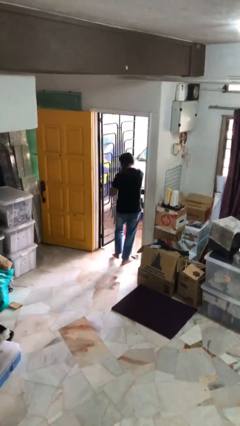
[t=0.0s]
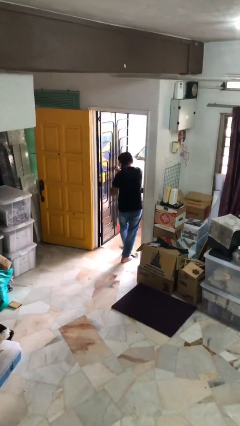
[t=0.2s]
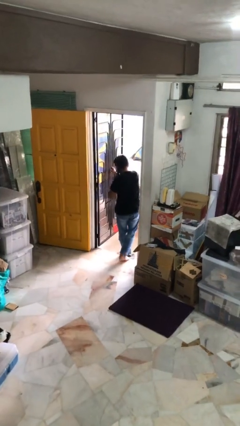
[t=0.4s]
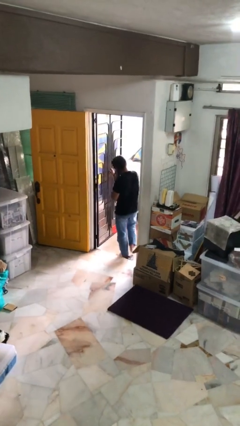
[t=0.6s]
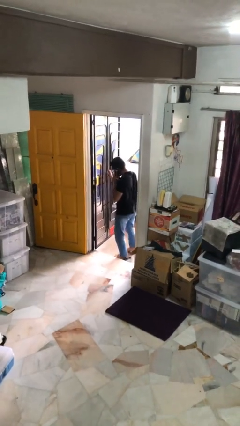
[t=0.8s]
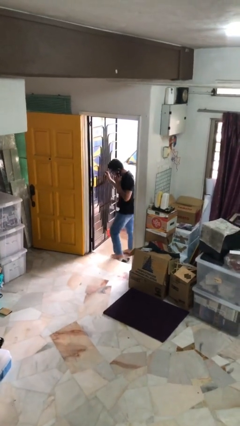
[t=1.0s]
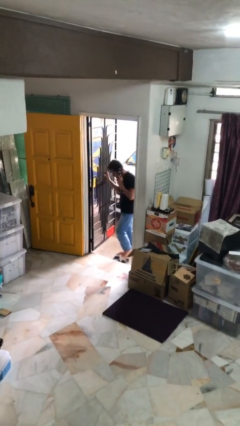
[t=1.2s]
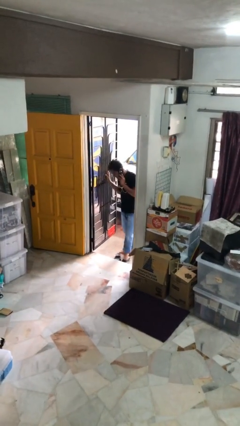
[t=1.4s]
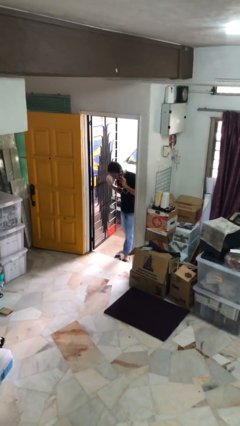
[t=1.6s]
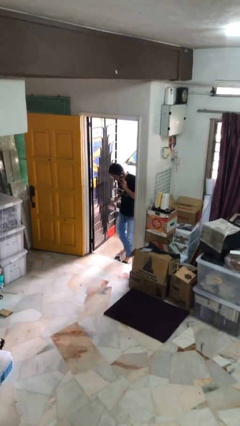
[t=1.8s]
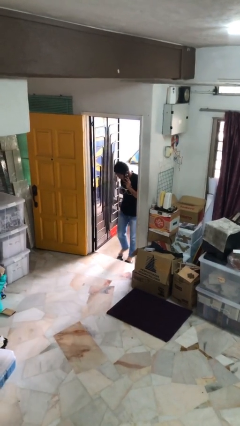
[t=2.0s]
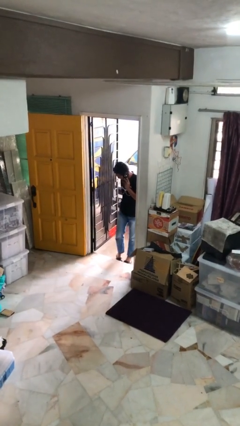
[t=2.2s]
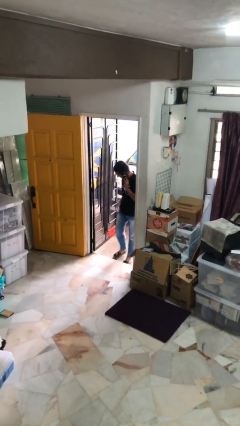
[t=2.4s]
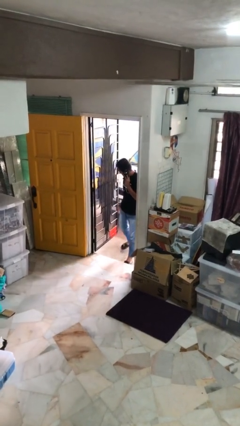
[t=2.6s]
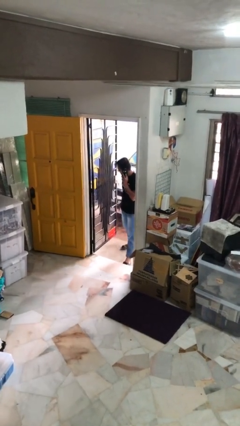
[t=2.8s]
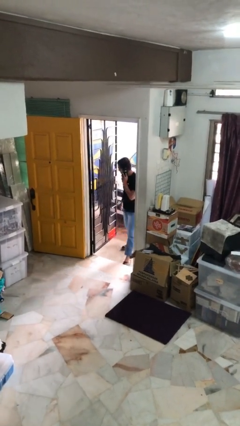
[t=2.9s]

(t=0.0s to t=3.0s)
person exits scene through structure

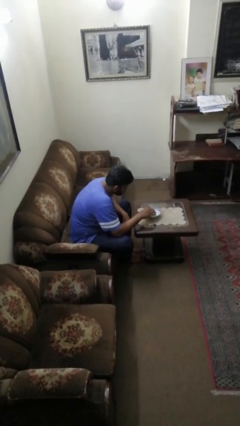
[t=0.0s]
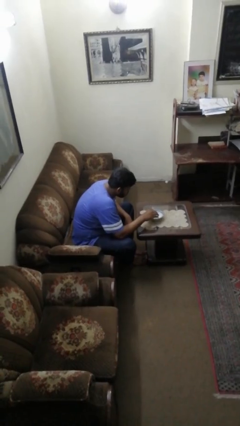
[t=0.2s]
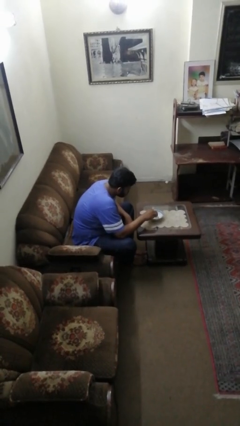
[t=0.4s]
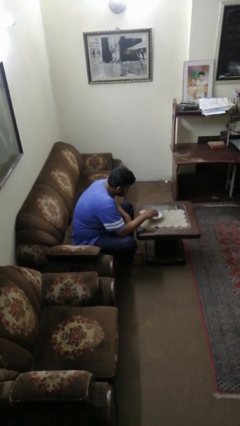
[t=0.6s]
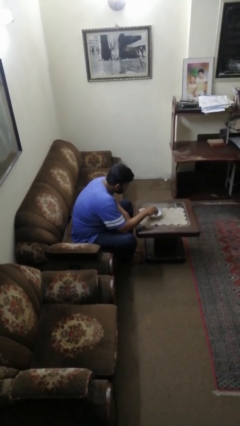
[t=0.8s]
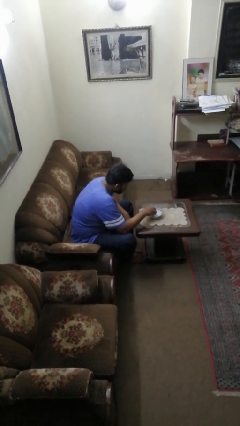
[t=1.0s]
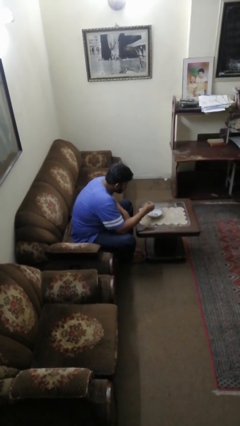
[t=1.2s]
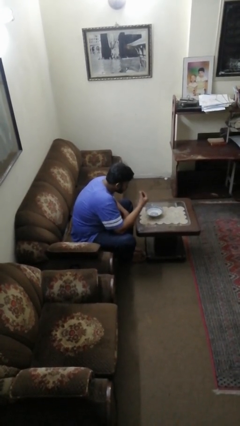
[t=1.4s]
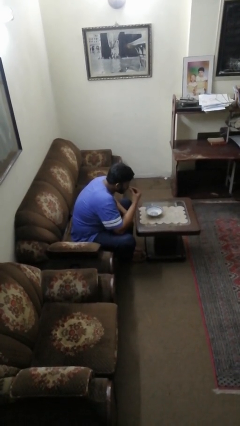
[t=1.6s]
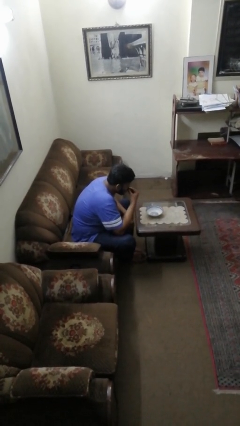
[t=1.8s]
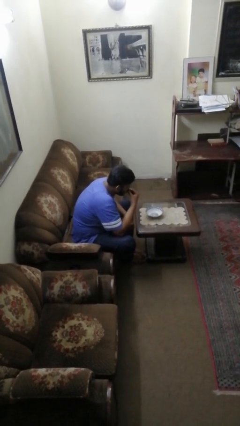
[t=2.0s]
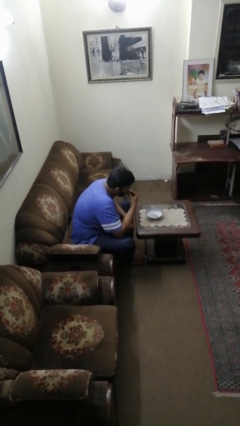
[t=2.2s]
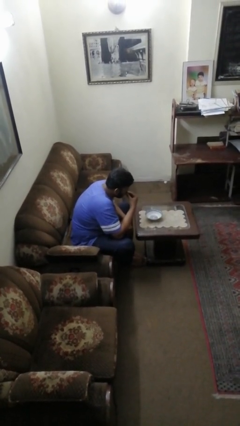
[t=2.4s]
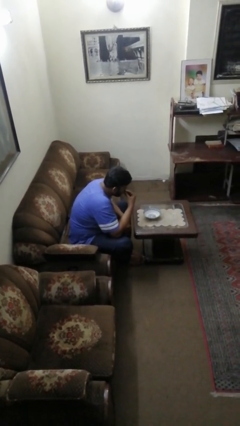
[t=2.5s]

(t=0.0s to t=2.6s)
person eats with hands

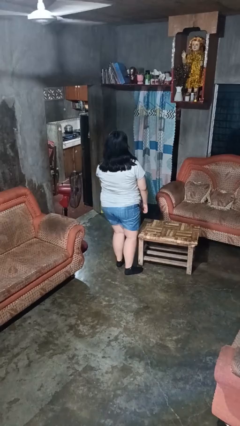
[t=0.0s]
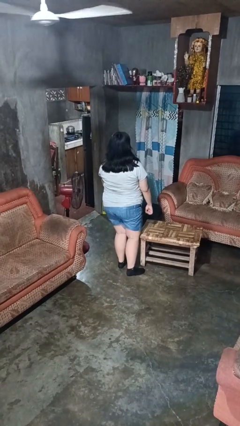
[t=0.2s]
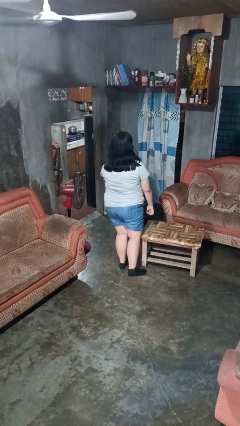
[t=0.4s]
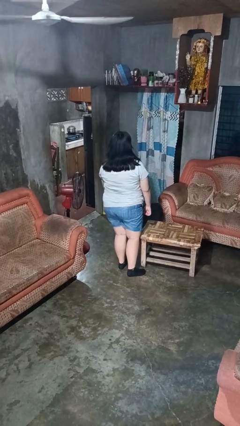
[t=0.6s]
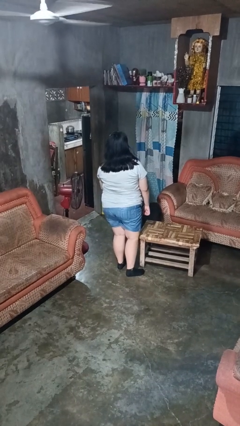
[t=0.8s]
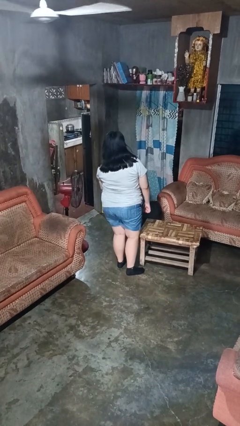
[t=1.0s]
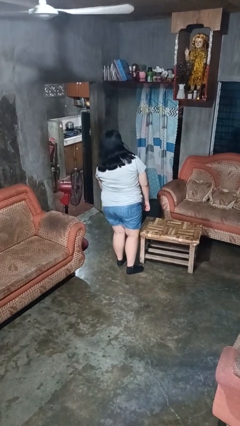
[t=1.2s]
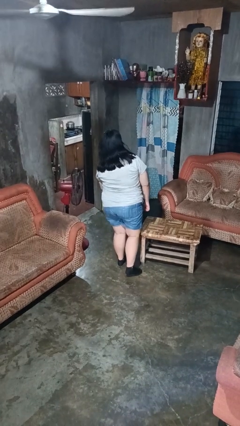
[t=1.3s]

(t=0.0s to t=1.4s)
person bumps into table

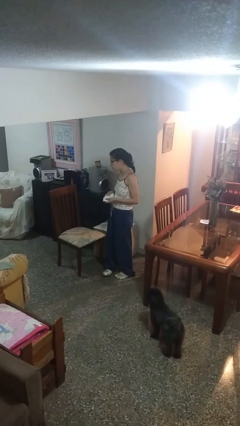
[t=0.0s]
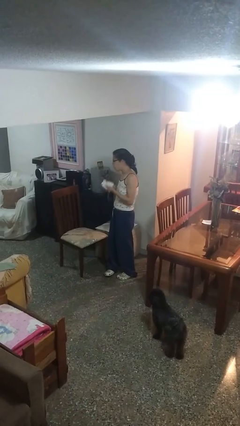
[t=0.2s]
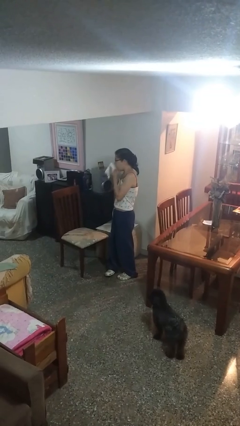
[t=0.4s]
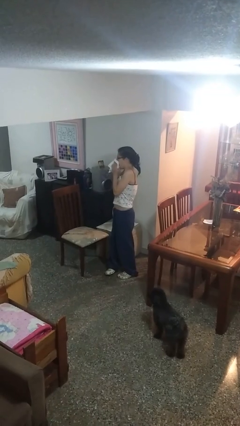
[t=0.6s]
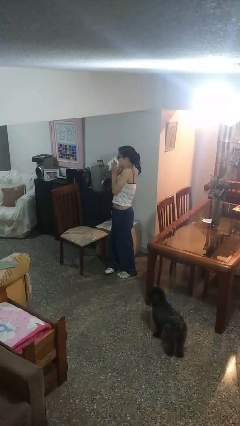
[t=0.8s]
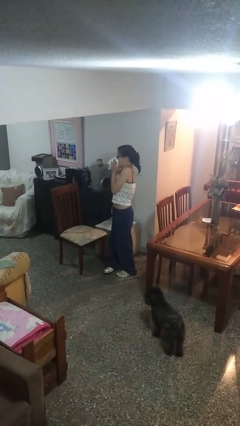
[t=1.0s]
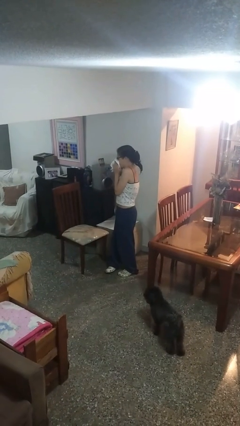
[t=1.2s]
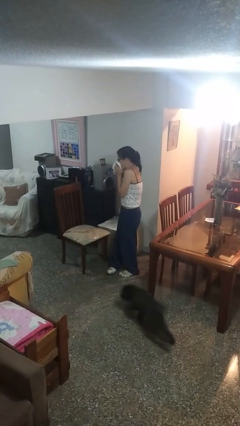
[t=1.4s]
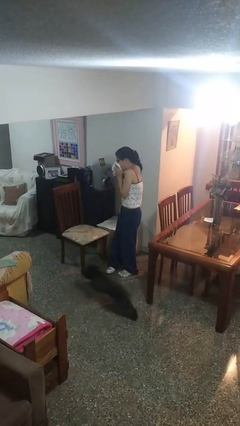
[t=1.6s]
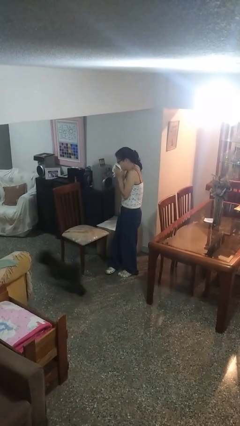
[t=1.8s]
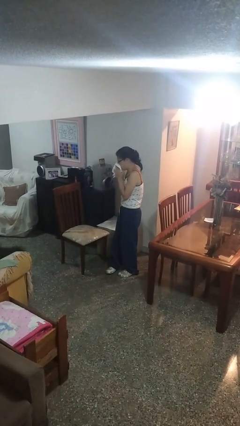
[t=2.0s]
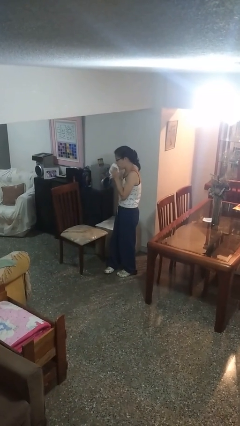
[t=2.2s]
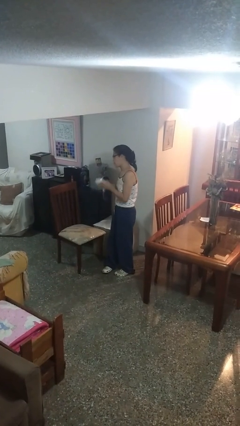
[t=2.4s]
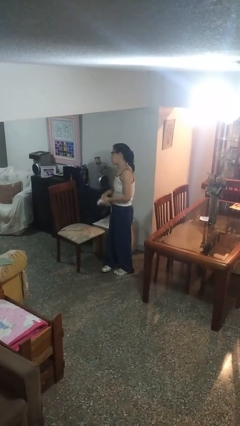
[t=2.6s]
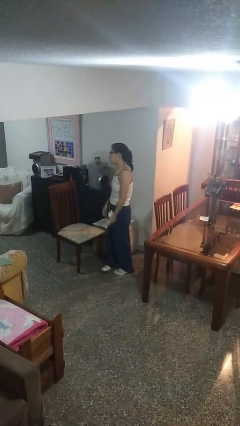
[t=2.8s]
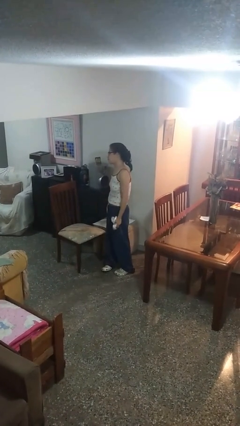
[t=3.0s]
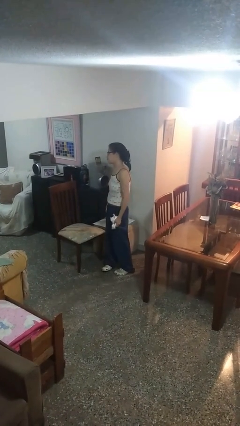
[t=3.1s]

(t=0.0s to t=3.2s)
person blows nose

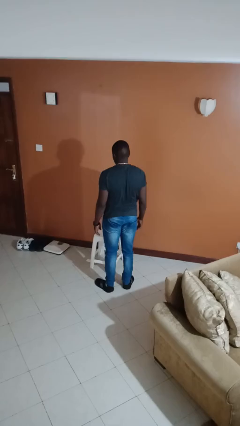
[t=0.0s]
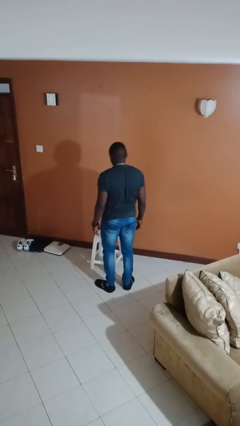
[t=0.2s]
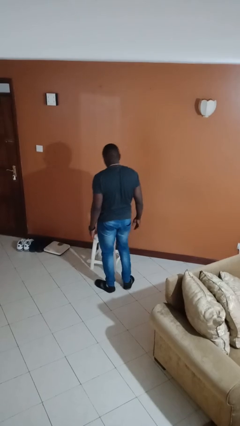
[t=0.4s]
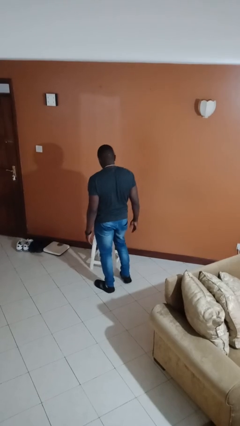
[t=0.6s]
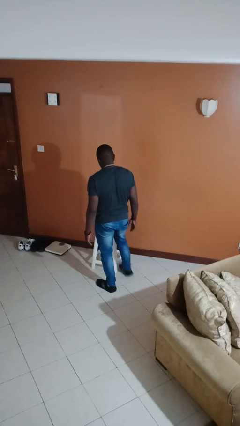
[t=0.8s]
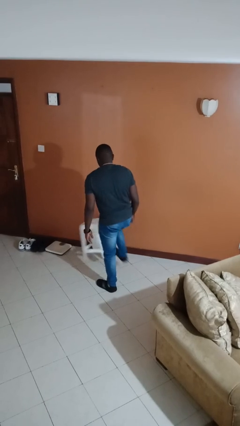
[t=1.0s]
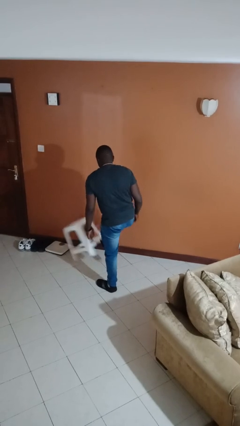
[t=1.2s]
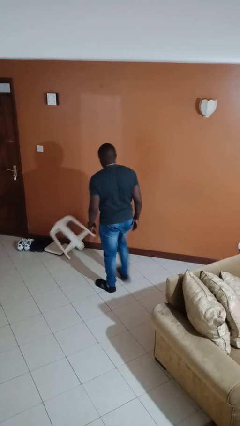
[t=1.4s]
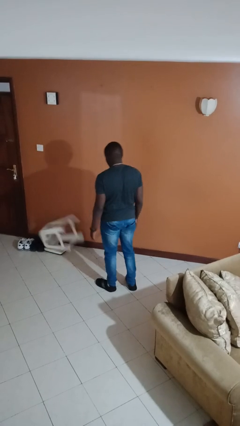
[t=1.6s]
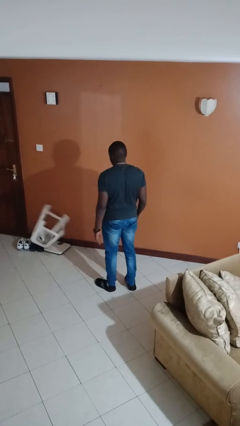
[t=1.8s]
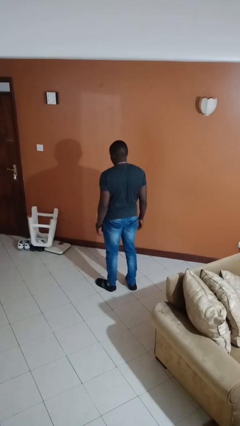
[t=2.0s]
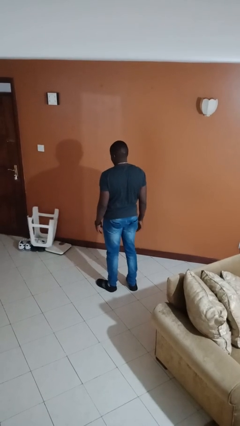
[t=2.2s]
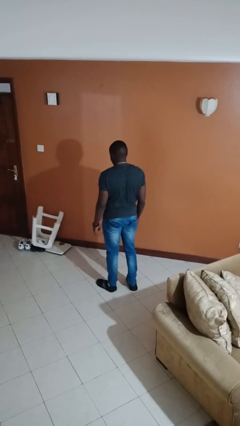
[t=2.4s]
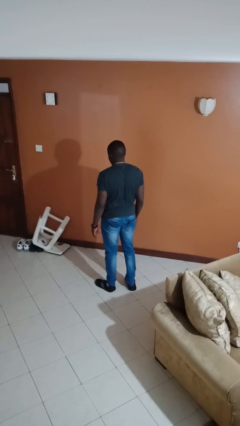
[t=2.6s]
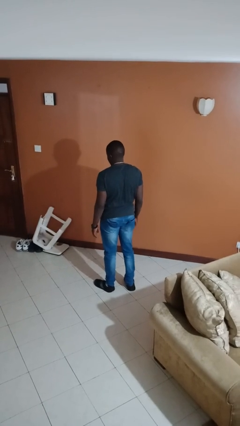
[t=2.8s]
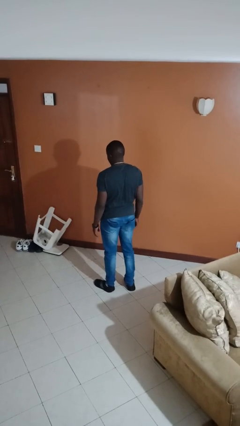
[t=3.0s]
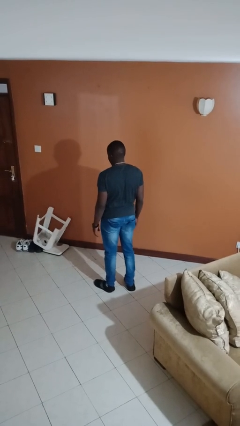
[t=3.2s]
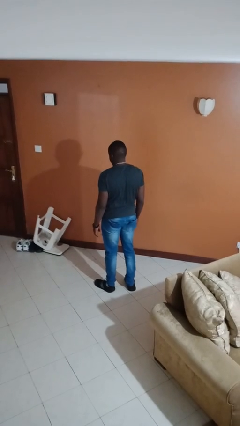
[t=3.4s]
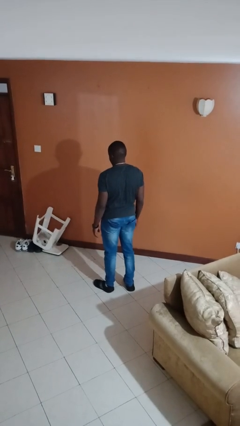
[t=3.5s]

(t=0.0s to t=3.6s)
person knocks over furniture

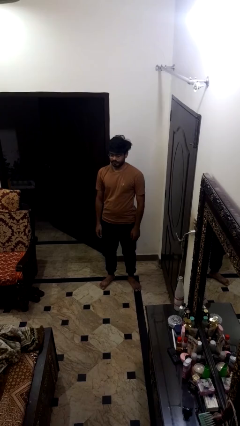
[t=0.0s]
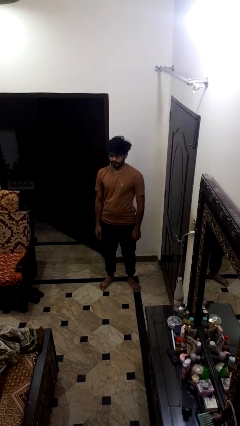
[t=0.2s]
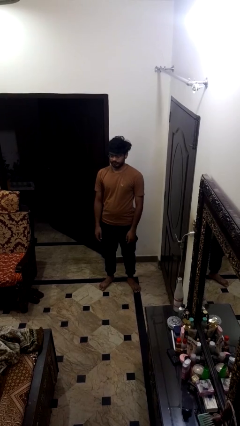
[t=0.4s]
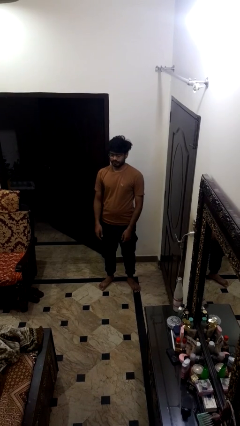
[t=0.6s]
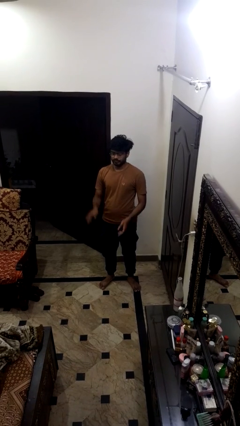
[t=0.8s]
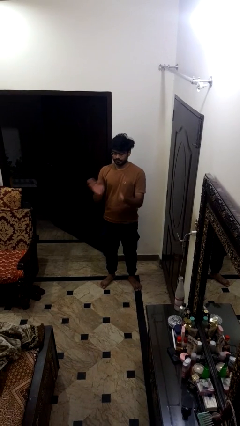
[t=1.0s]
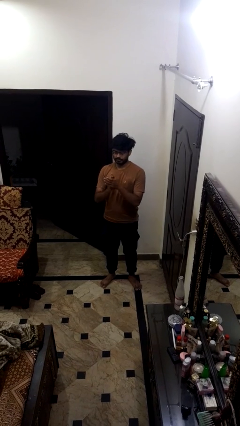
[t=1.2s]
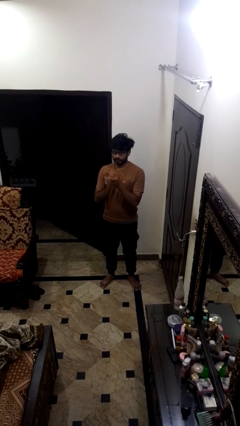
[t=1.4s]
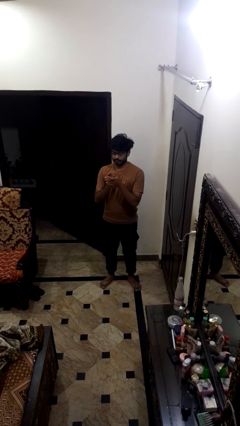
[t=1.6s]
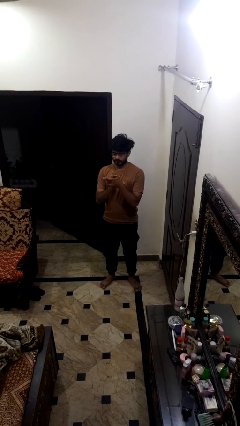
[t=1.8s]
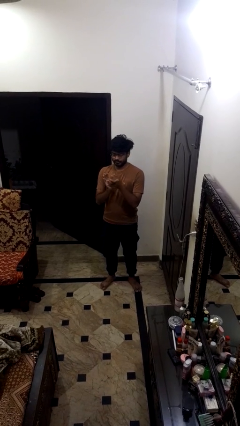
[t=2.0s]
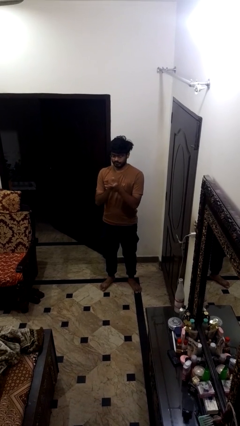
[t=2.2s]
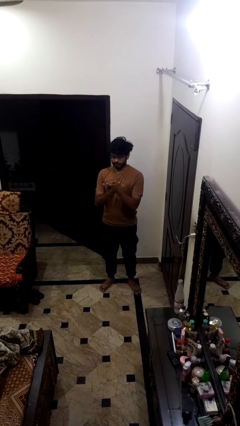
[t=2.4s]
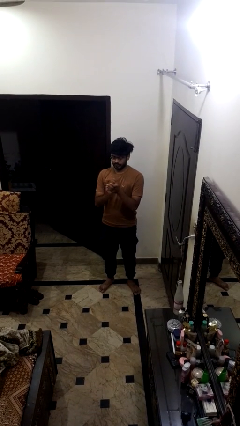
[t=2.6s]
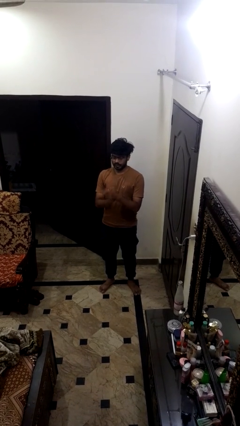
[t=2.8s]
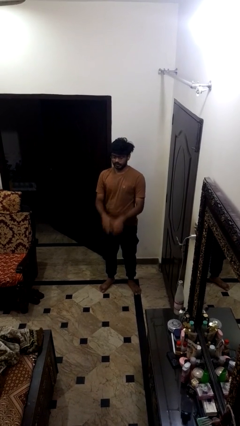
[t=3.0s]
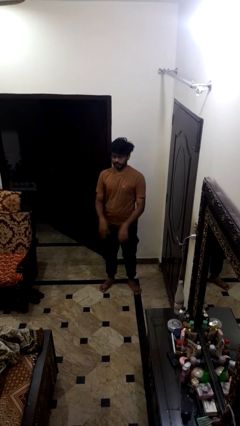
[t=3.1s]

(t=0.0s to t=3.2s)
person claps hands

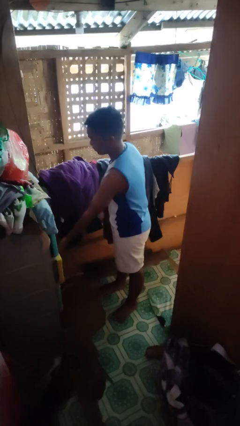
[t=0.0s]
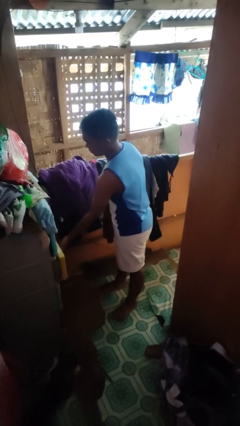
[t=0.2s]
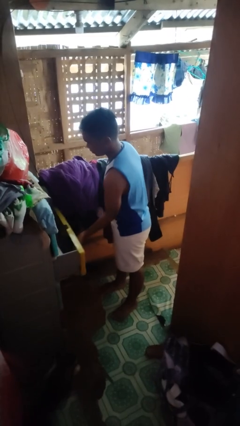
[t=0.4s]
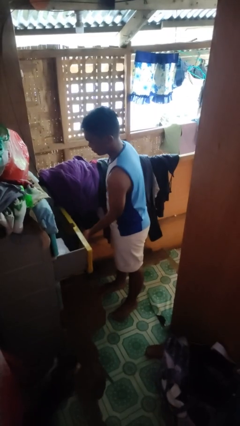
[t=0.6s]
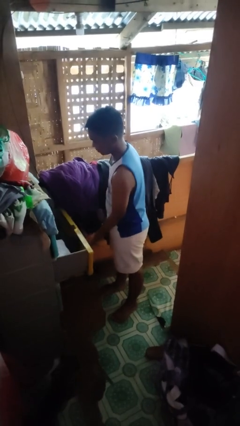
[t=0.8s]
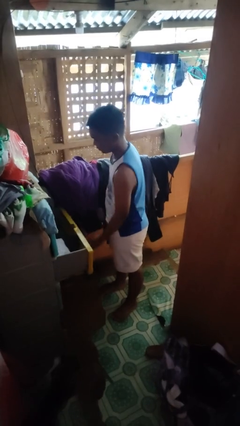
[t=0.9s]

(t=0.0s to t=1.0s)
person opens dresser drawer
